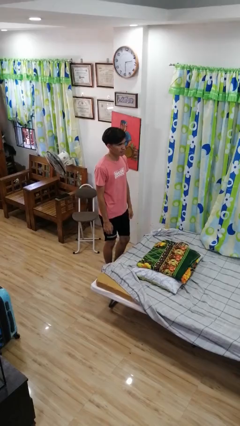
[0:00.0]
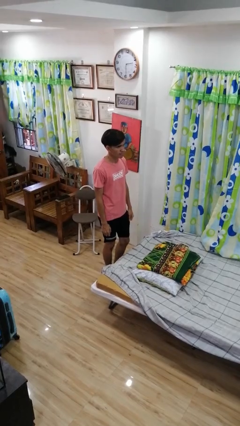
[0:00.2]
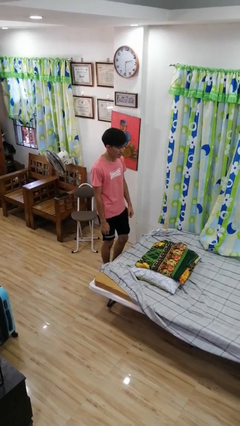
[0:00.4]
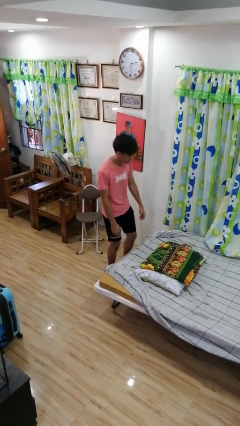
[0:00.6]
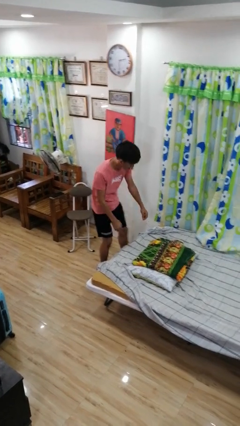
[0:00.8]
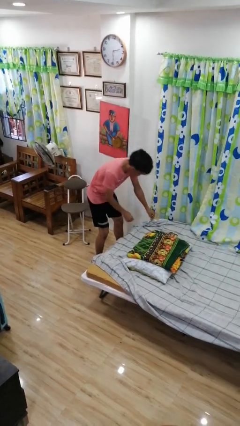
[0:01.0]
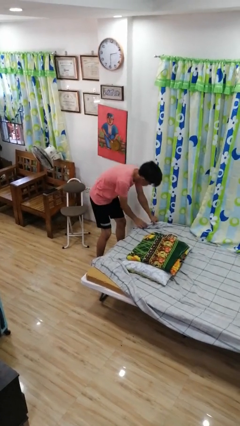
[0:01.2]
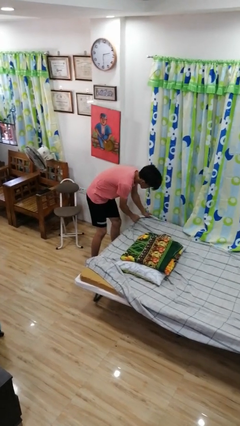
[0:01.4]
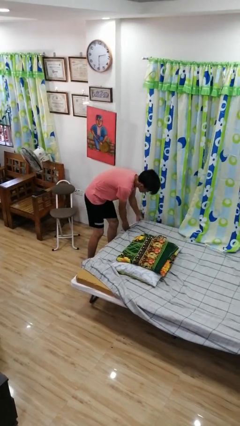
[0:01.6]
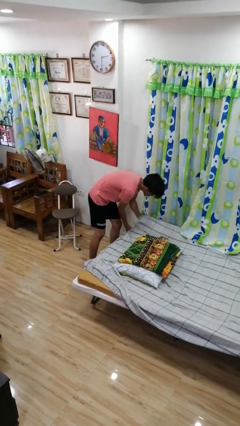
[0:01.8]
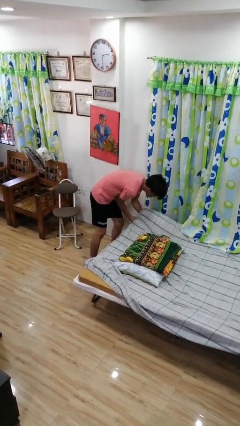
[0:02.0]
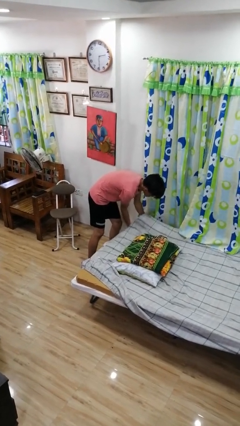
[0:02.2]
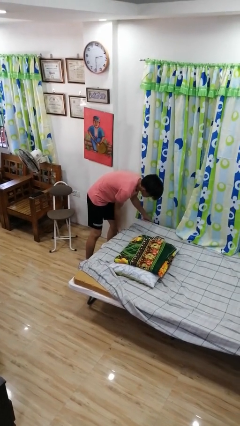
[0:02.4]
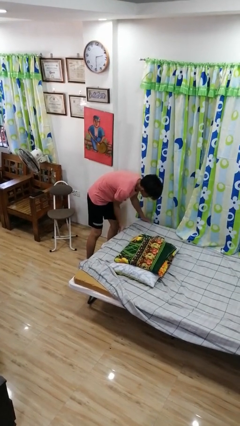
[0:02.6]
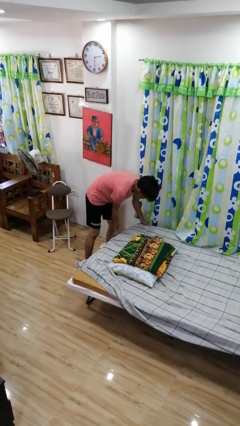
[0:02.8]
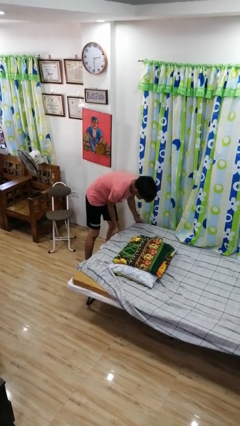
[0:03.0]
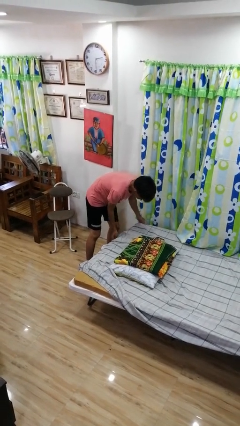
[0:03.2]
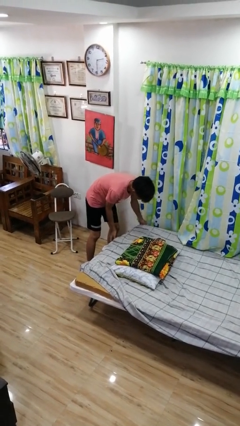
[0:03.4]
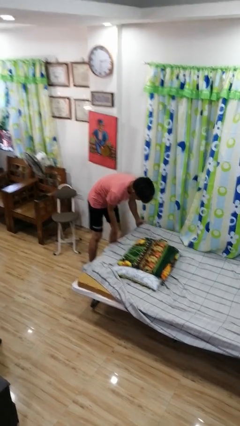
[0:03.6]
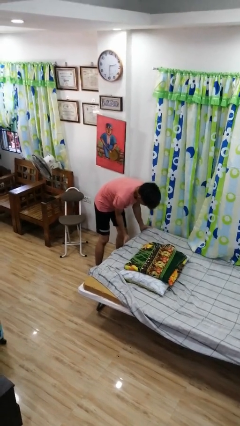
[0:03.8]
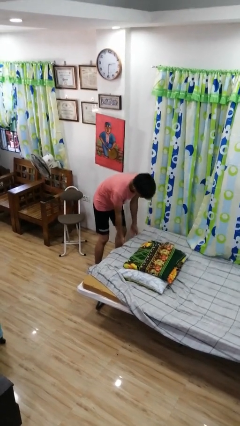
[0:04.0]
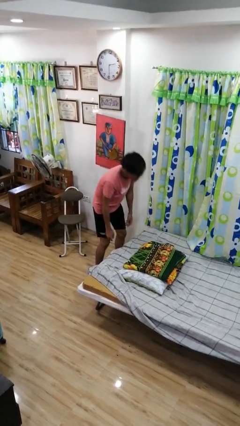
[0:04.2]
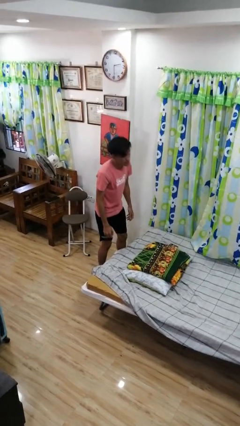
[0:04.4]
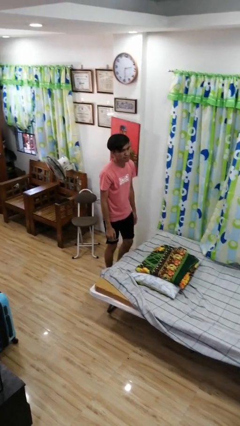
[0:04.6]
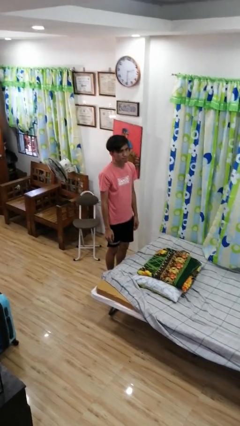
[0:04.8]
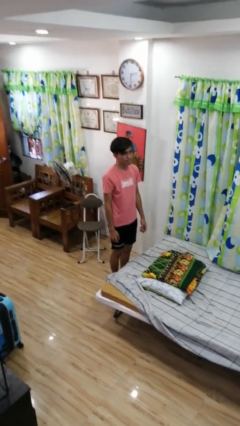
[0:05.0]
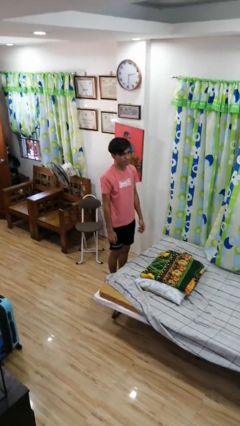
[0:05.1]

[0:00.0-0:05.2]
person makes bed

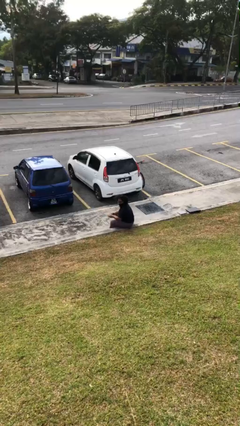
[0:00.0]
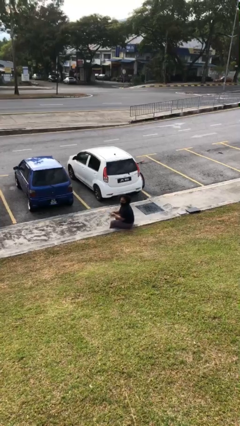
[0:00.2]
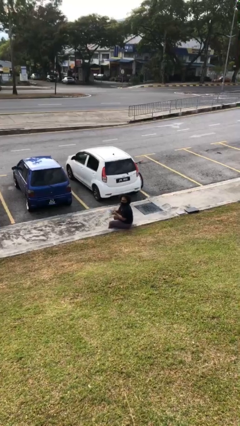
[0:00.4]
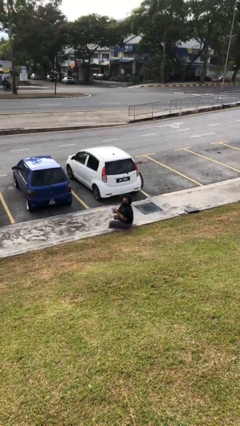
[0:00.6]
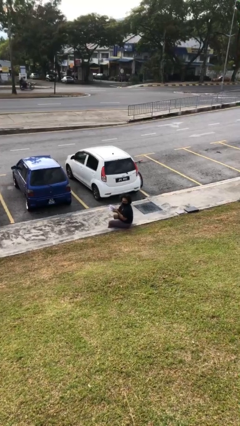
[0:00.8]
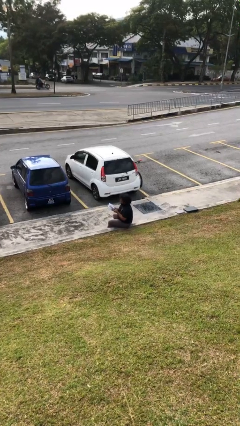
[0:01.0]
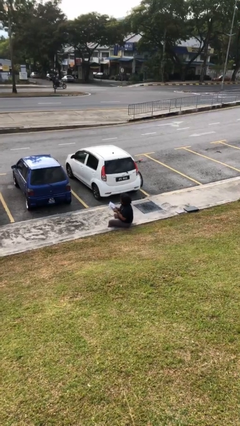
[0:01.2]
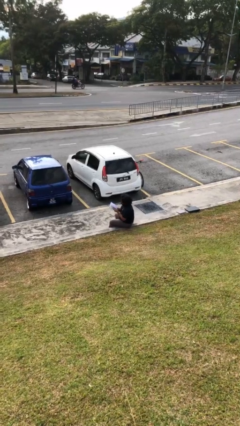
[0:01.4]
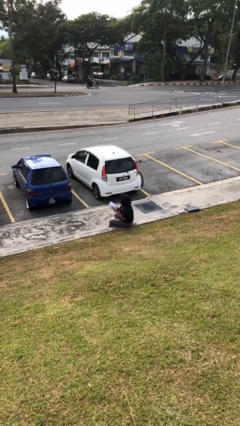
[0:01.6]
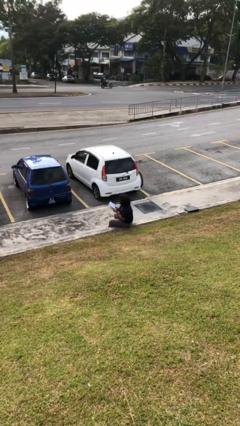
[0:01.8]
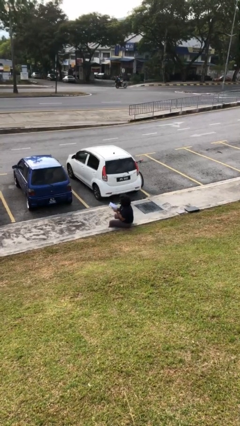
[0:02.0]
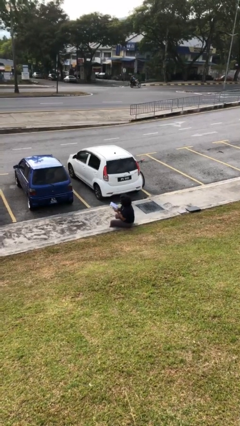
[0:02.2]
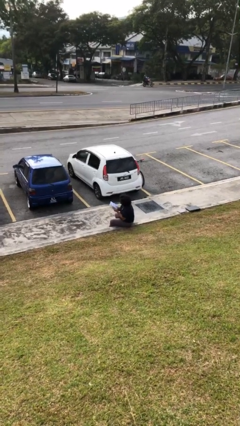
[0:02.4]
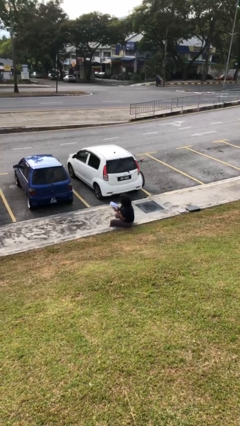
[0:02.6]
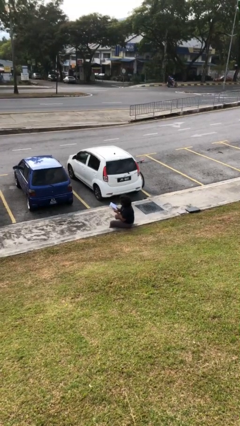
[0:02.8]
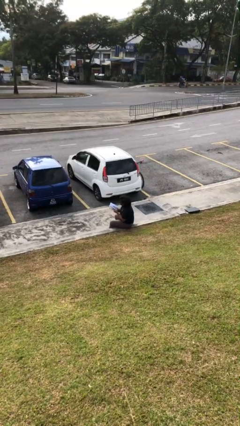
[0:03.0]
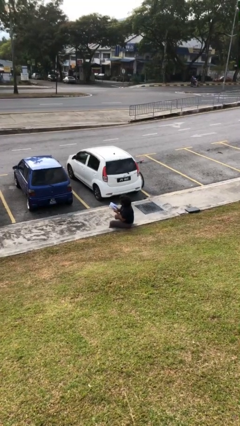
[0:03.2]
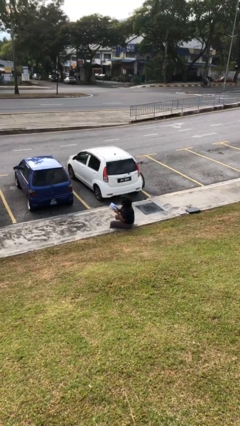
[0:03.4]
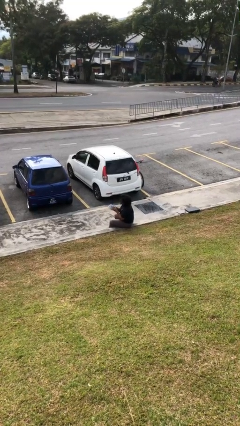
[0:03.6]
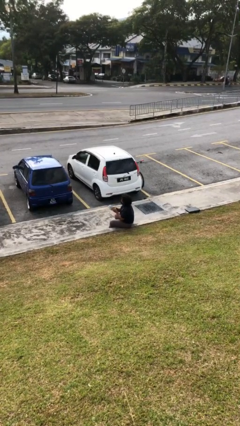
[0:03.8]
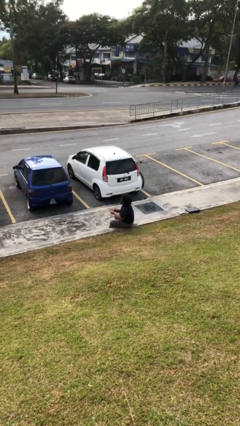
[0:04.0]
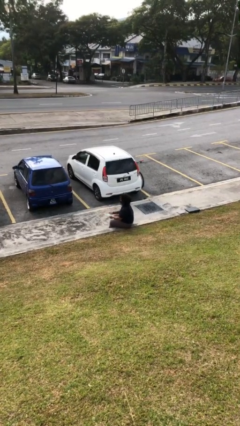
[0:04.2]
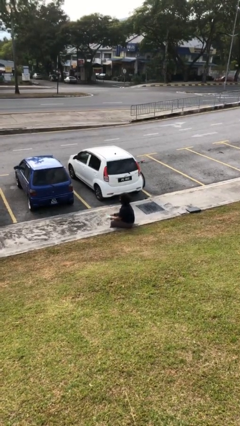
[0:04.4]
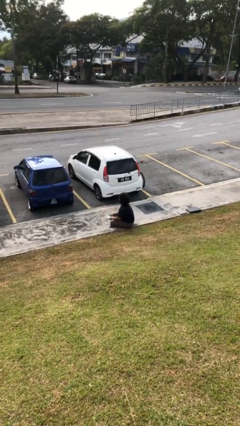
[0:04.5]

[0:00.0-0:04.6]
person reads document

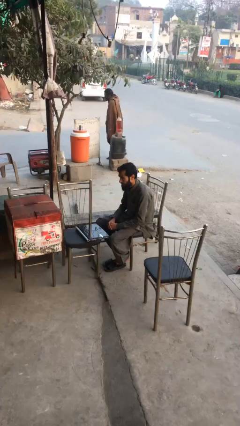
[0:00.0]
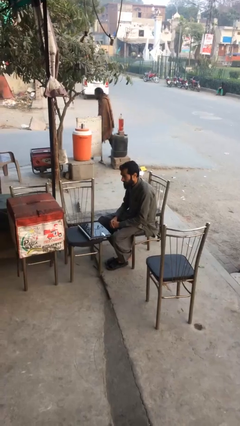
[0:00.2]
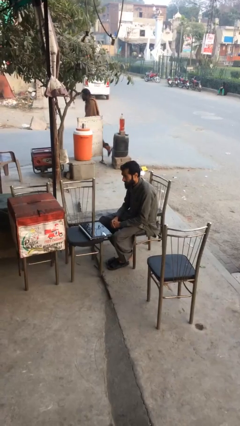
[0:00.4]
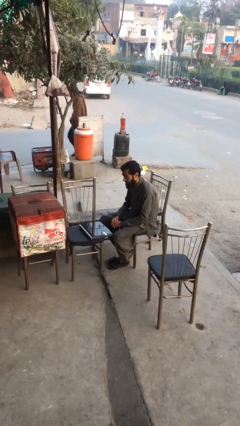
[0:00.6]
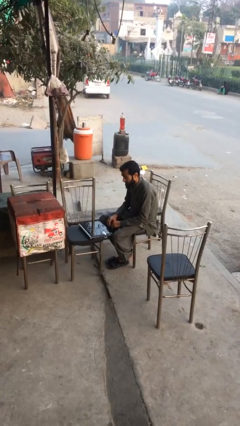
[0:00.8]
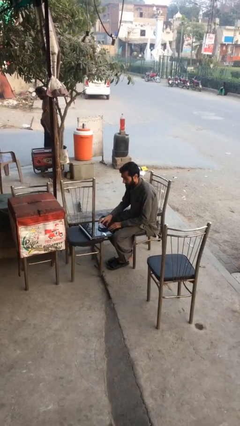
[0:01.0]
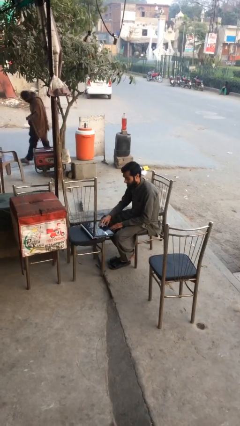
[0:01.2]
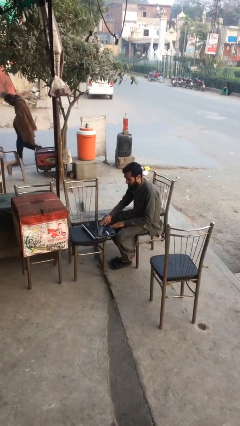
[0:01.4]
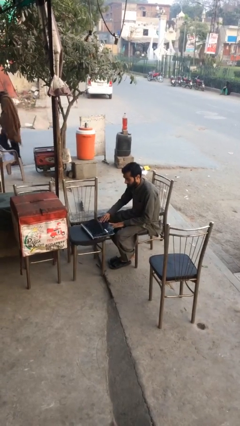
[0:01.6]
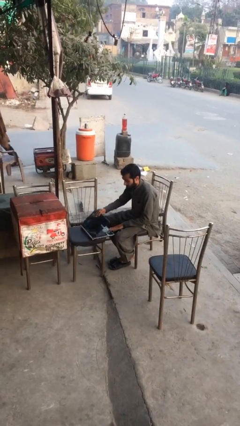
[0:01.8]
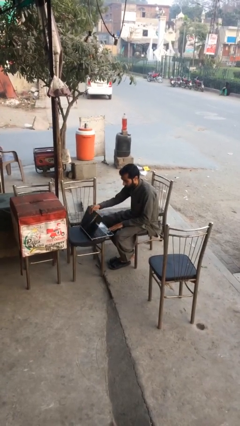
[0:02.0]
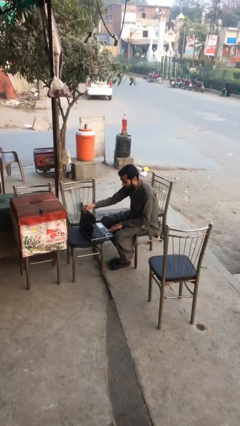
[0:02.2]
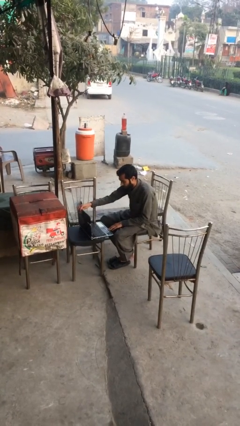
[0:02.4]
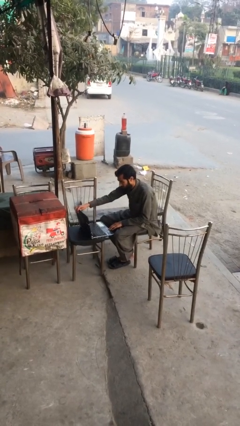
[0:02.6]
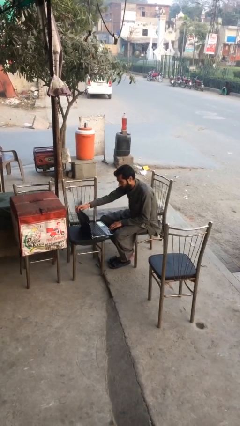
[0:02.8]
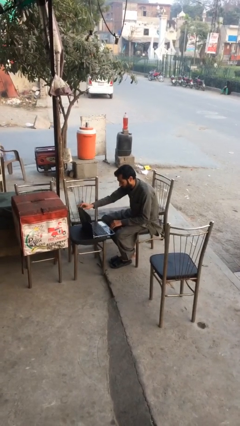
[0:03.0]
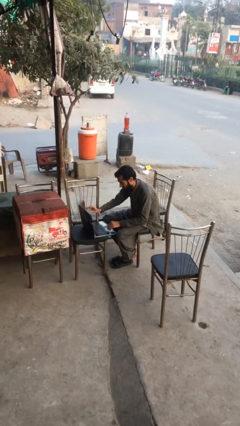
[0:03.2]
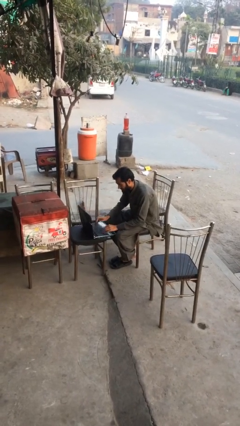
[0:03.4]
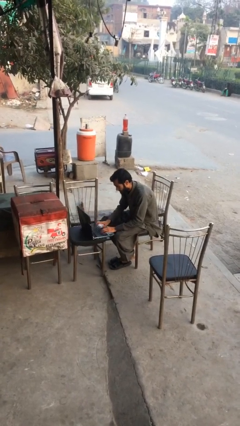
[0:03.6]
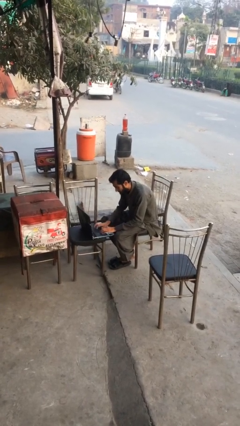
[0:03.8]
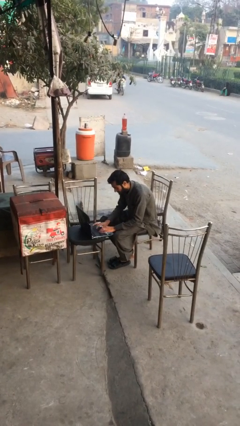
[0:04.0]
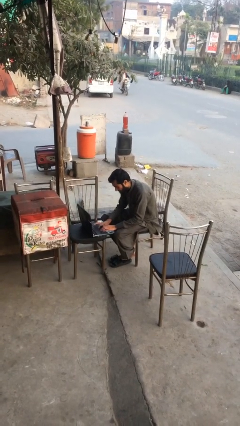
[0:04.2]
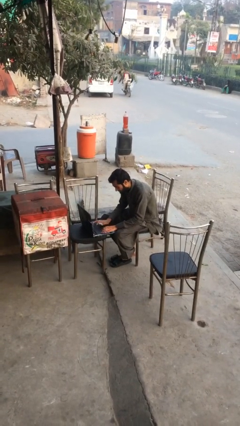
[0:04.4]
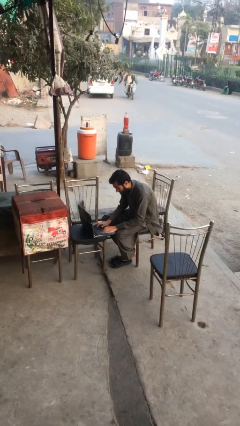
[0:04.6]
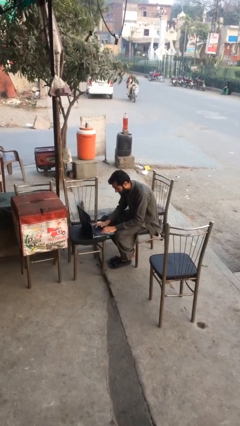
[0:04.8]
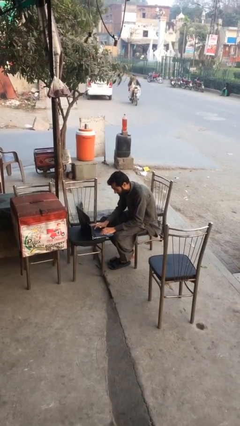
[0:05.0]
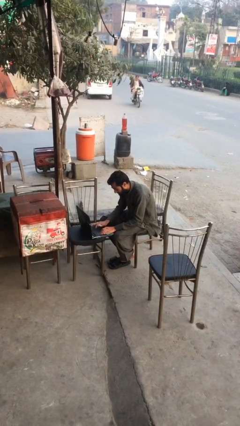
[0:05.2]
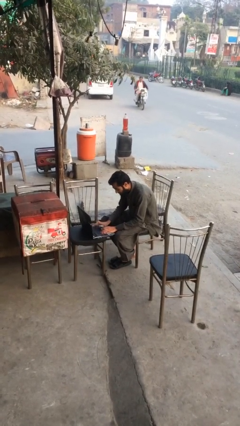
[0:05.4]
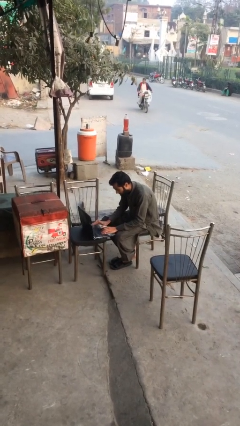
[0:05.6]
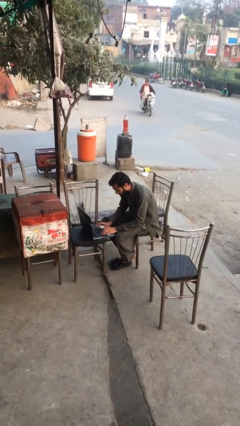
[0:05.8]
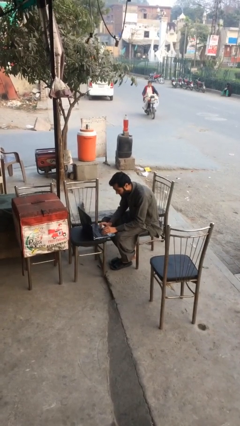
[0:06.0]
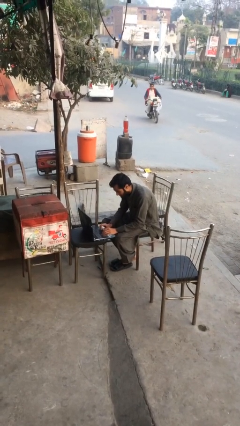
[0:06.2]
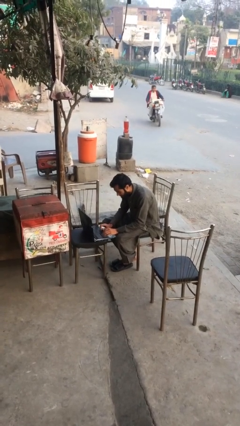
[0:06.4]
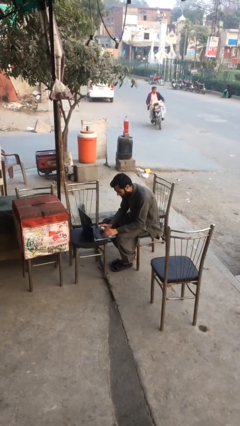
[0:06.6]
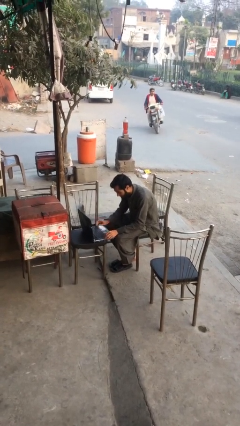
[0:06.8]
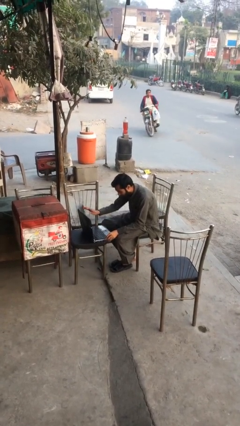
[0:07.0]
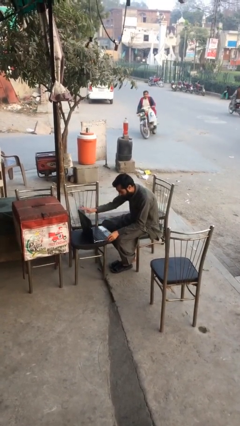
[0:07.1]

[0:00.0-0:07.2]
person interacts with laptop

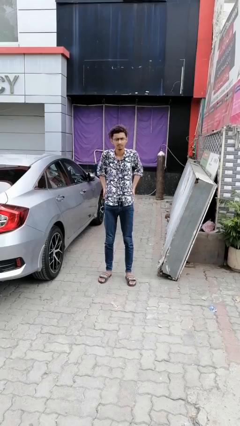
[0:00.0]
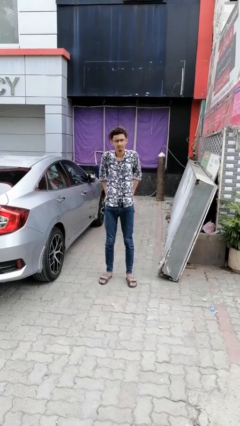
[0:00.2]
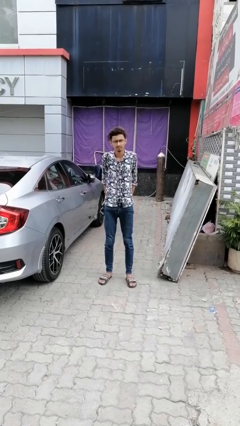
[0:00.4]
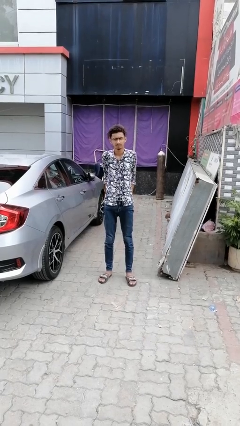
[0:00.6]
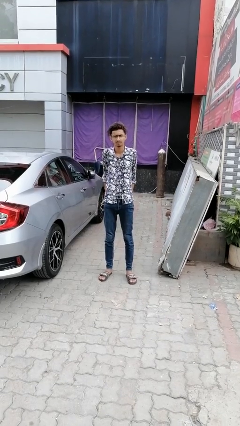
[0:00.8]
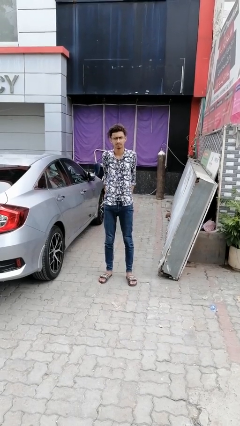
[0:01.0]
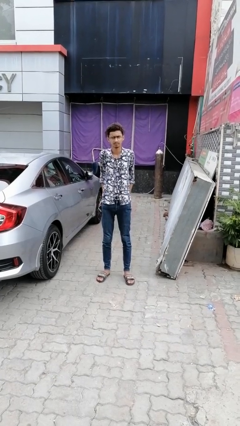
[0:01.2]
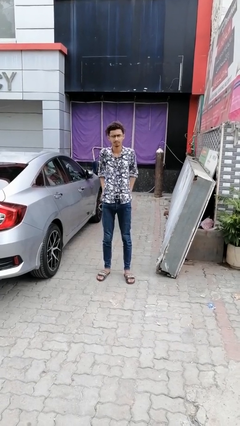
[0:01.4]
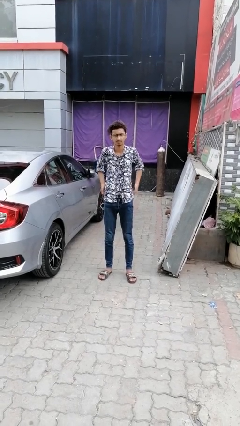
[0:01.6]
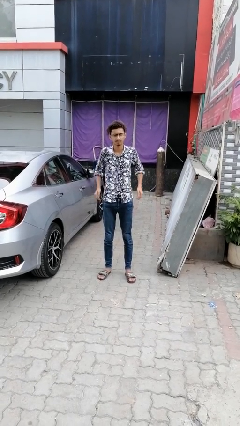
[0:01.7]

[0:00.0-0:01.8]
person puts hands in back pockets
